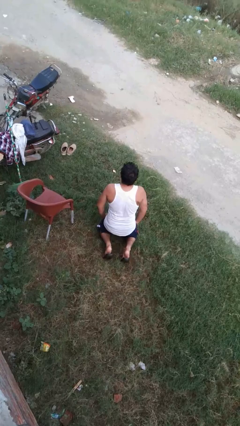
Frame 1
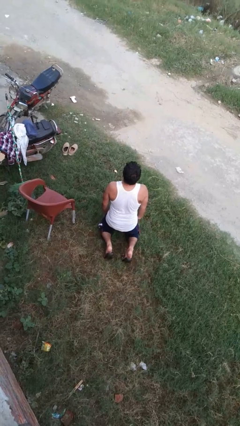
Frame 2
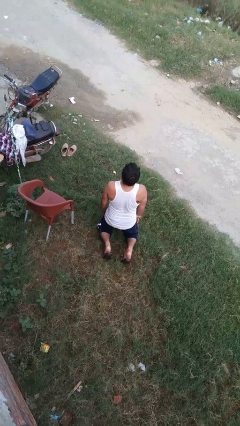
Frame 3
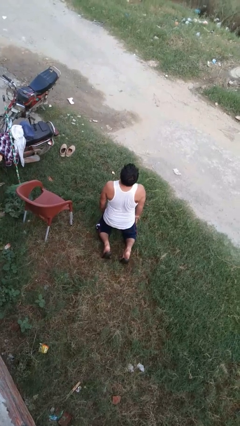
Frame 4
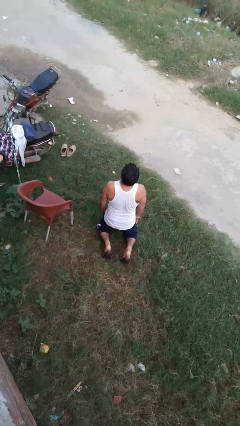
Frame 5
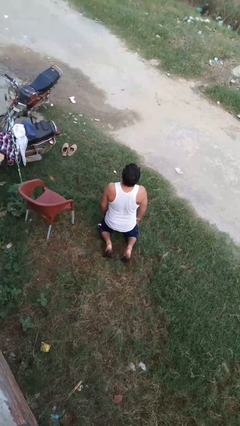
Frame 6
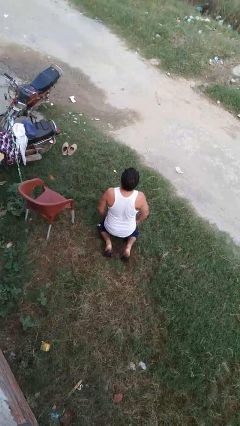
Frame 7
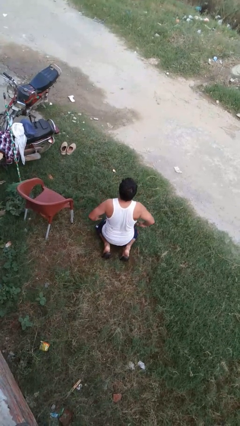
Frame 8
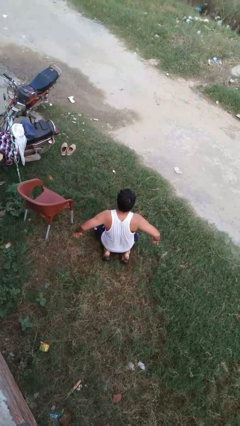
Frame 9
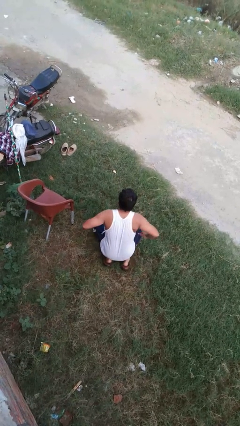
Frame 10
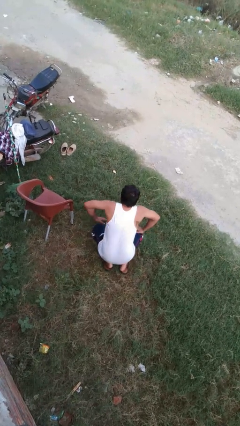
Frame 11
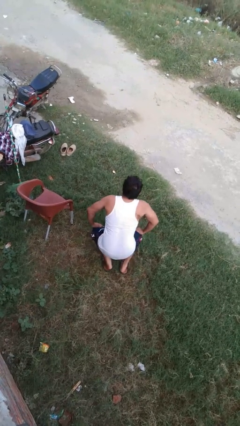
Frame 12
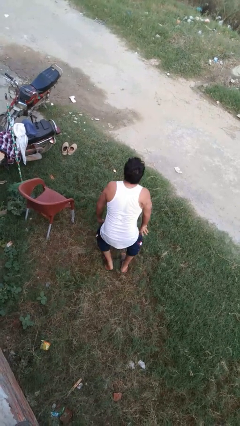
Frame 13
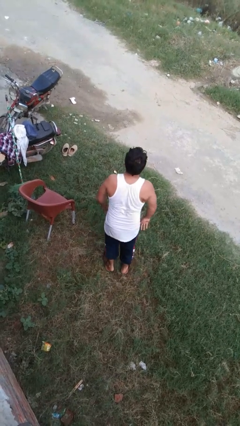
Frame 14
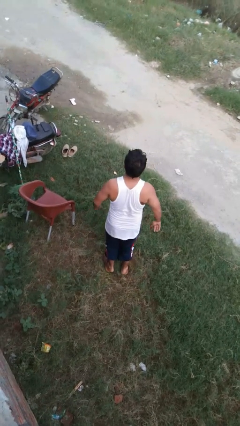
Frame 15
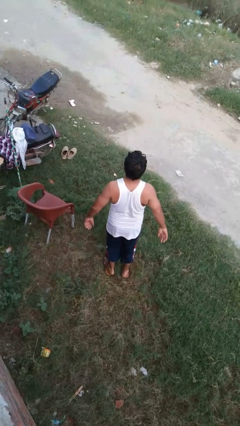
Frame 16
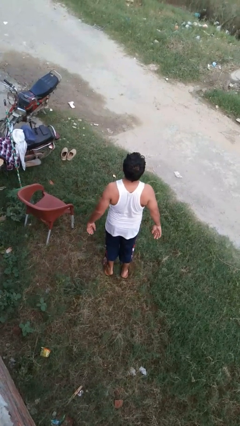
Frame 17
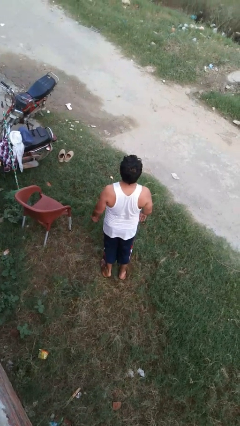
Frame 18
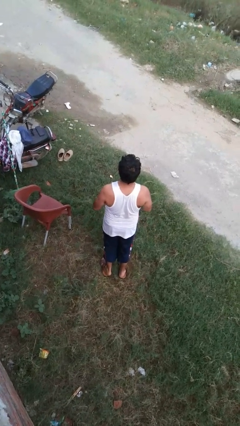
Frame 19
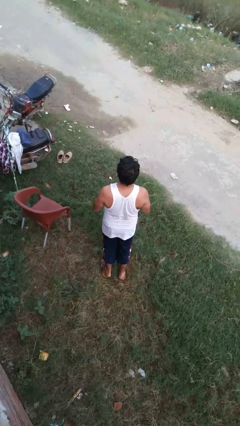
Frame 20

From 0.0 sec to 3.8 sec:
person stands up from floor

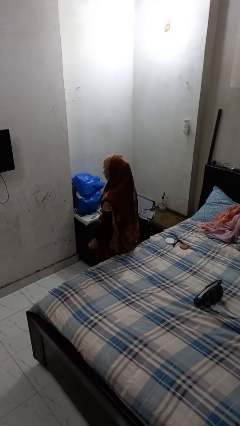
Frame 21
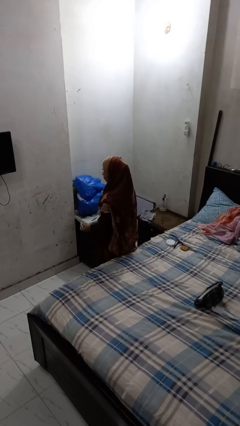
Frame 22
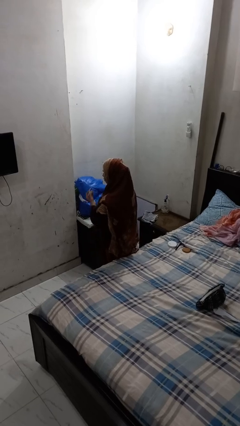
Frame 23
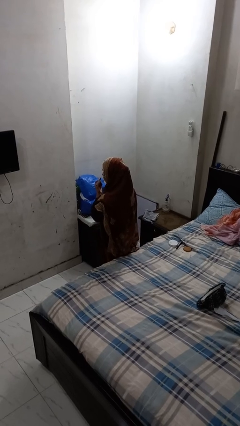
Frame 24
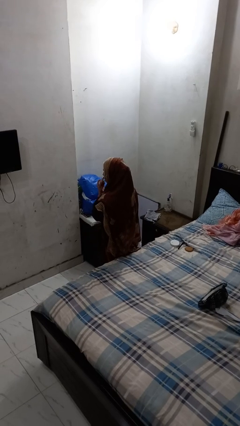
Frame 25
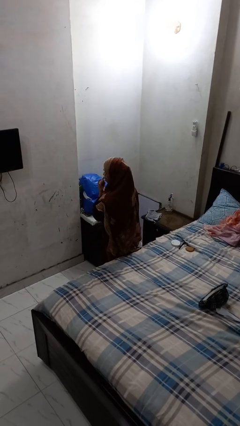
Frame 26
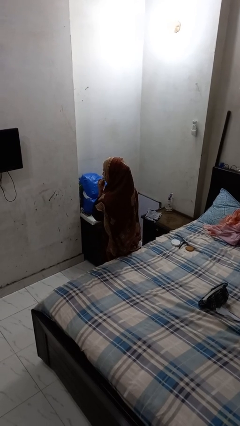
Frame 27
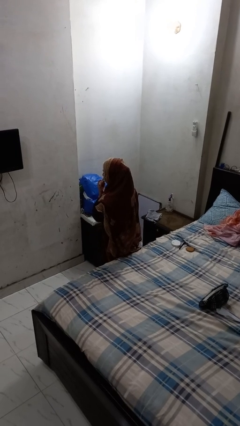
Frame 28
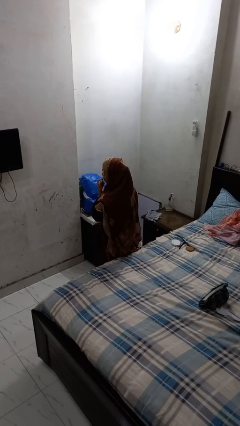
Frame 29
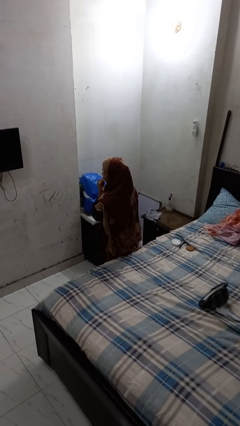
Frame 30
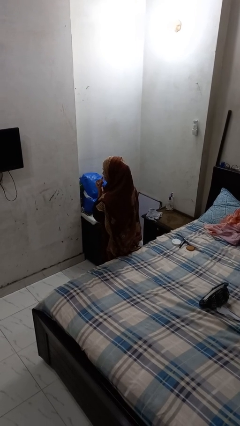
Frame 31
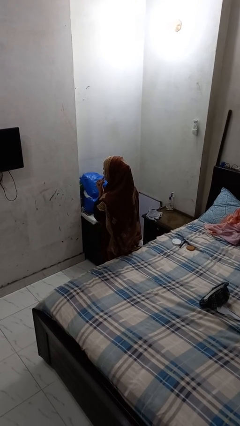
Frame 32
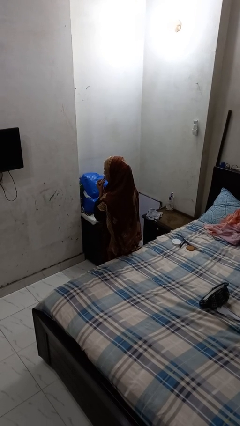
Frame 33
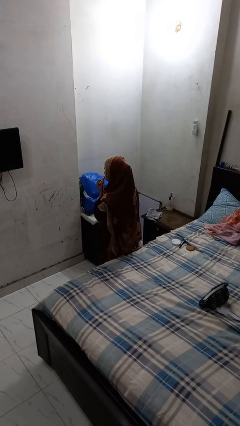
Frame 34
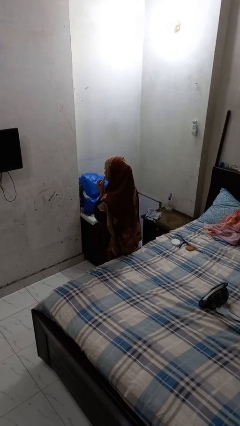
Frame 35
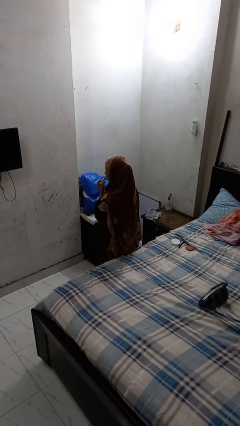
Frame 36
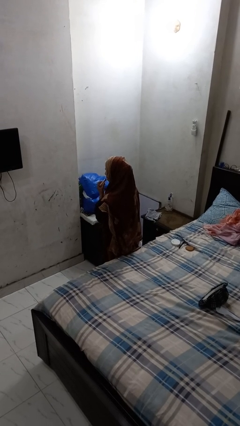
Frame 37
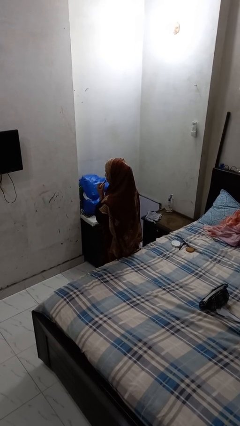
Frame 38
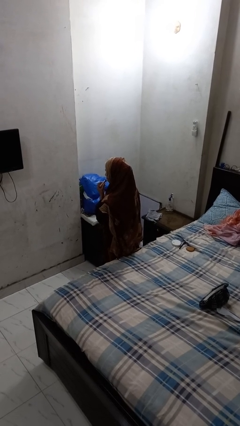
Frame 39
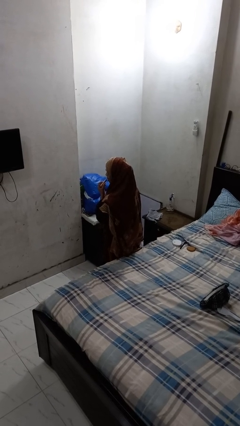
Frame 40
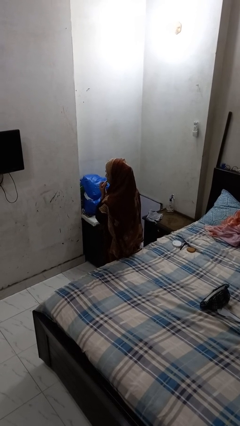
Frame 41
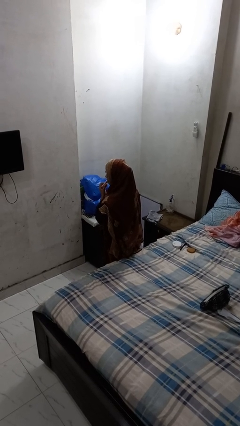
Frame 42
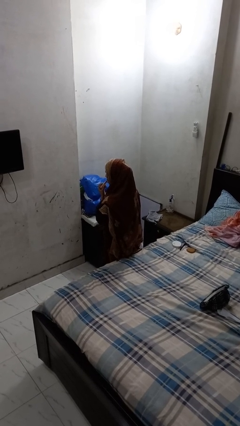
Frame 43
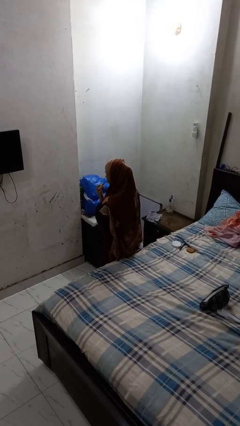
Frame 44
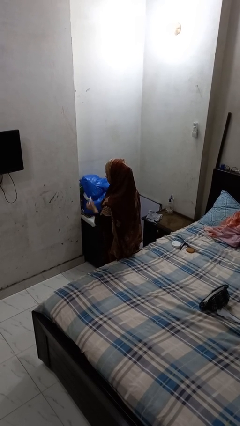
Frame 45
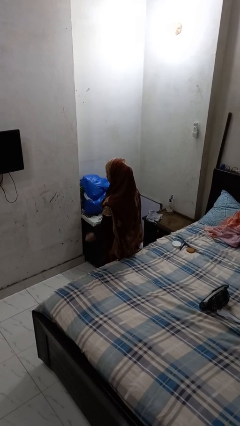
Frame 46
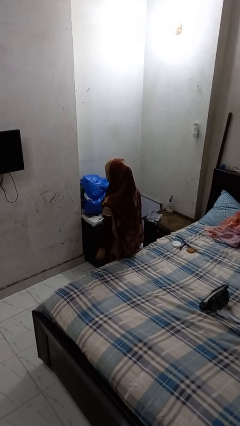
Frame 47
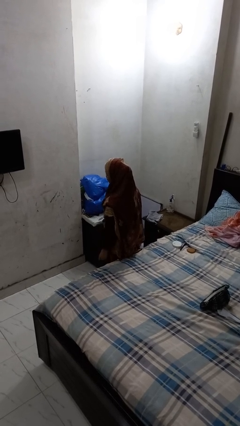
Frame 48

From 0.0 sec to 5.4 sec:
person applies lip makeup

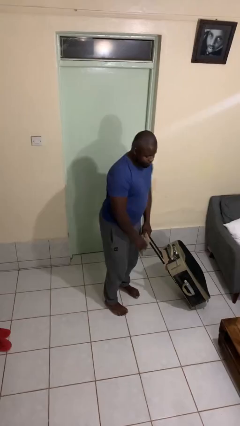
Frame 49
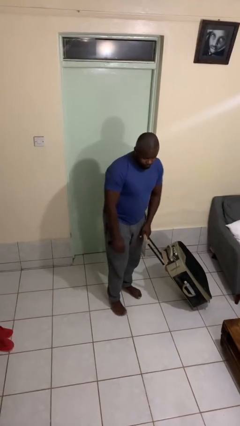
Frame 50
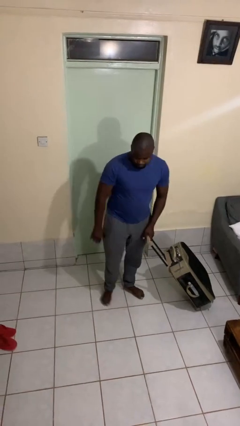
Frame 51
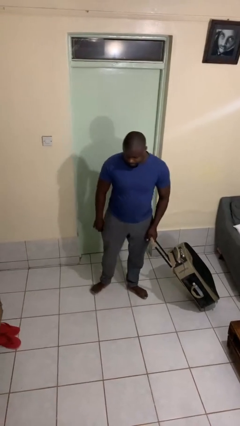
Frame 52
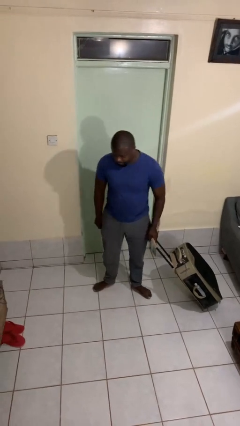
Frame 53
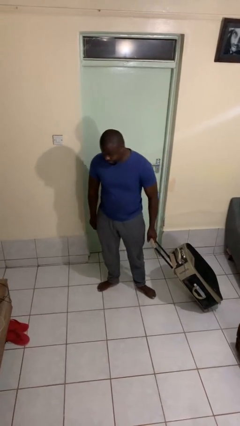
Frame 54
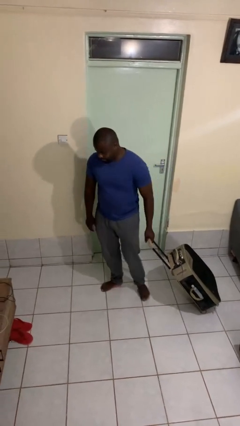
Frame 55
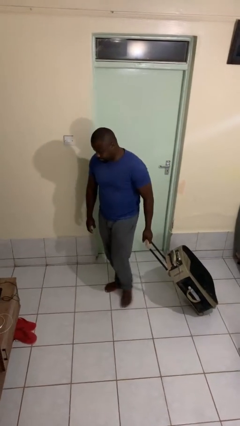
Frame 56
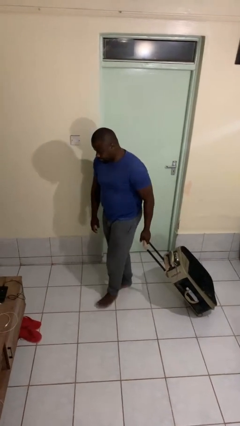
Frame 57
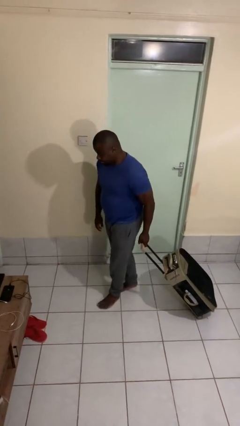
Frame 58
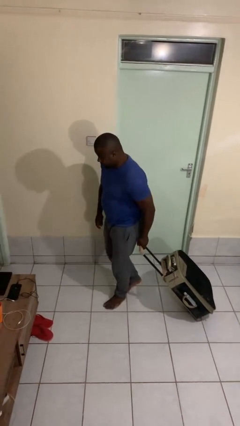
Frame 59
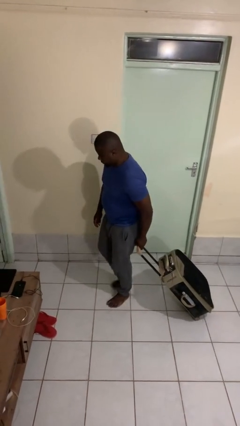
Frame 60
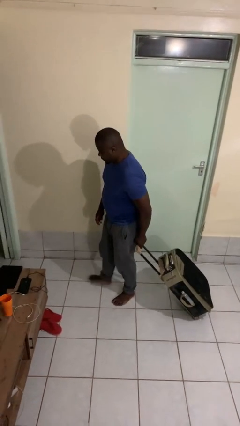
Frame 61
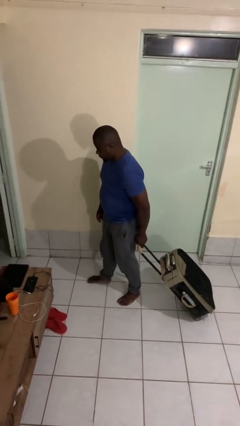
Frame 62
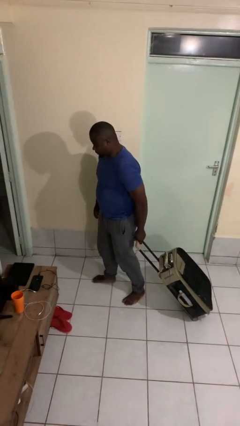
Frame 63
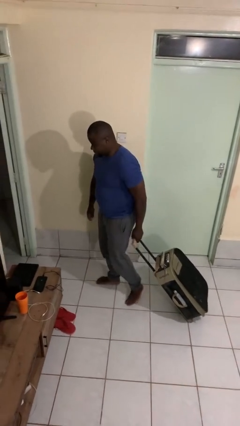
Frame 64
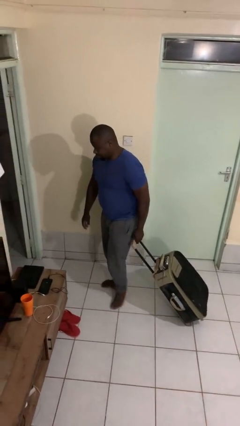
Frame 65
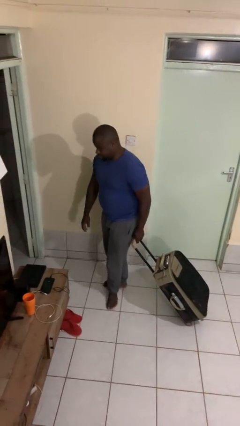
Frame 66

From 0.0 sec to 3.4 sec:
person pulls wheeled cart

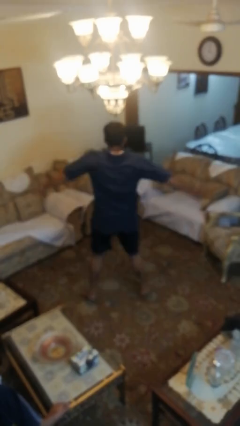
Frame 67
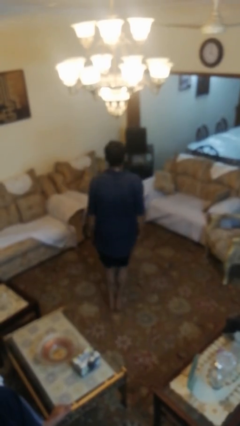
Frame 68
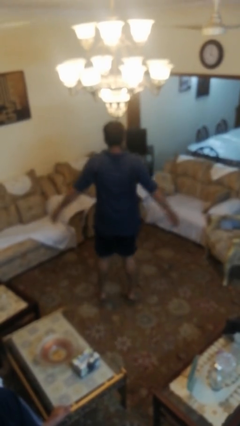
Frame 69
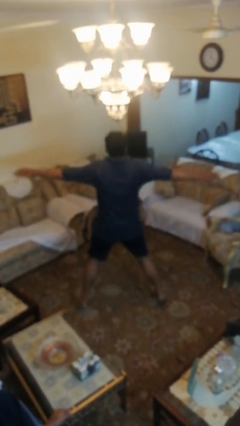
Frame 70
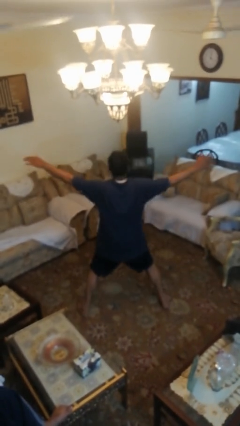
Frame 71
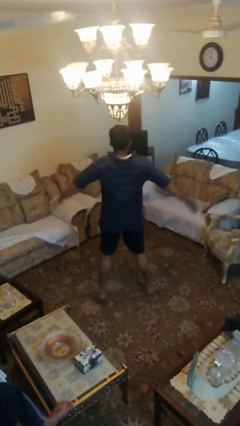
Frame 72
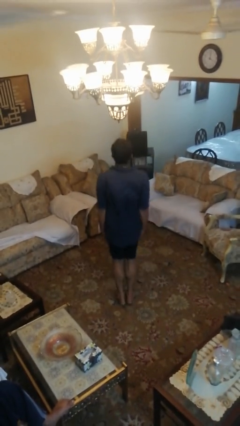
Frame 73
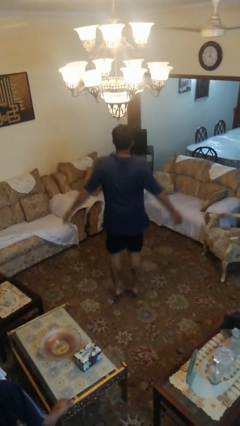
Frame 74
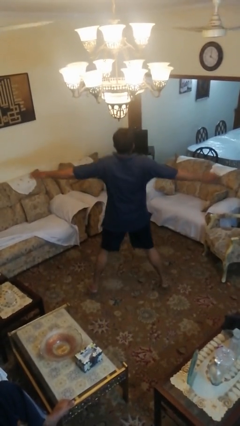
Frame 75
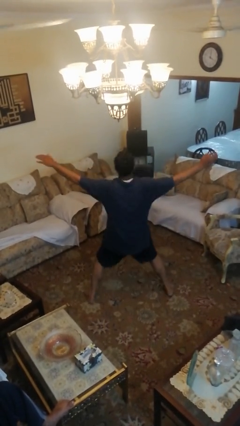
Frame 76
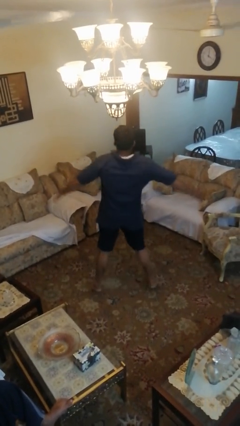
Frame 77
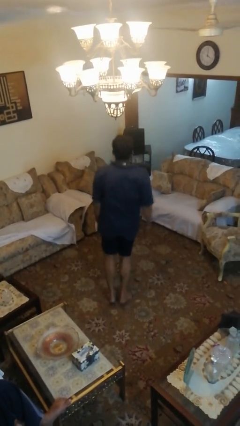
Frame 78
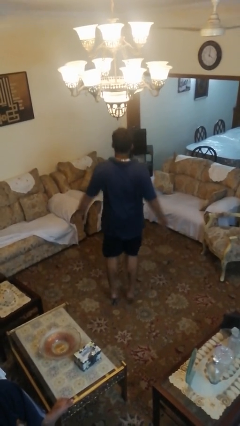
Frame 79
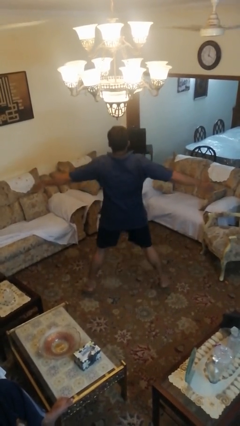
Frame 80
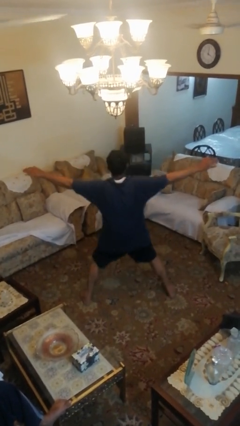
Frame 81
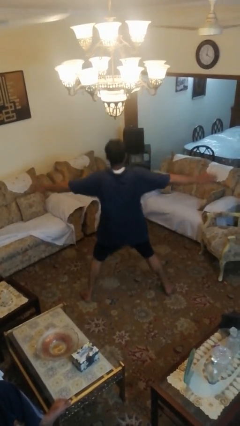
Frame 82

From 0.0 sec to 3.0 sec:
person exercises with jumping jacks

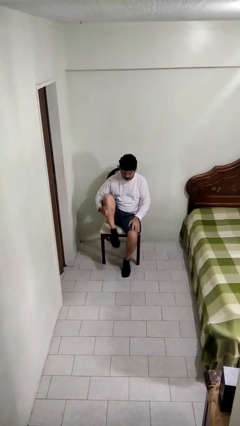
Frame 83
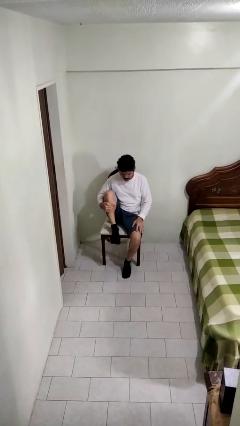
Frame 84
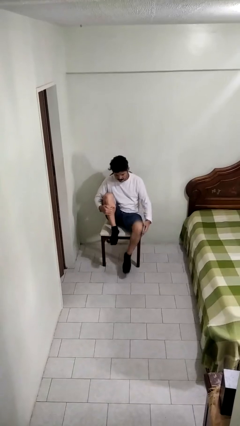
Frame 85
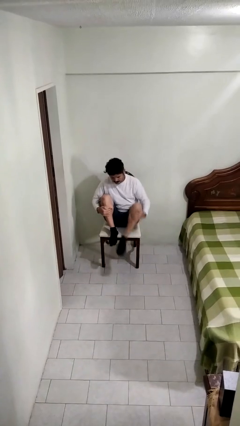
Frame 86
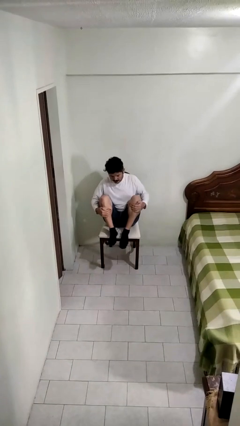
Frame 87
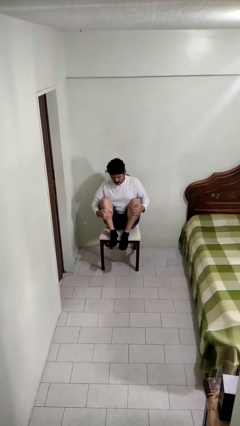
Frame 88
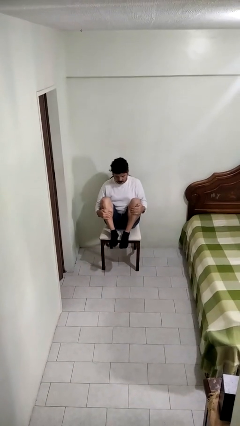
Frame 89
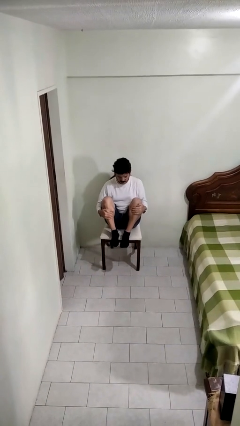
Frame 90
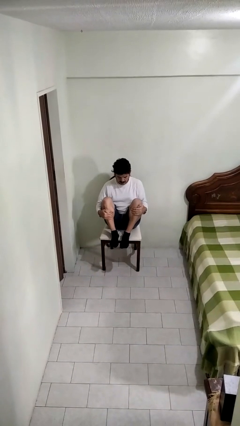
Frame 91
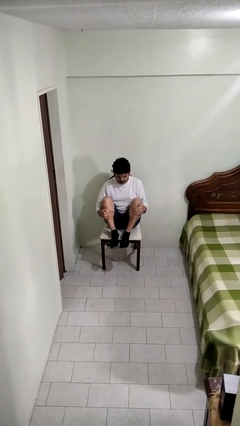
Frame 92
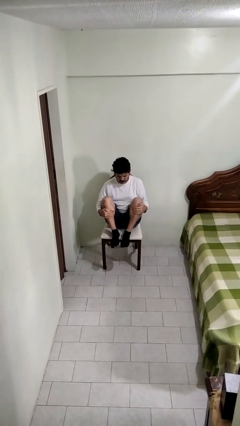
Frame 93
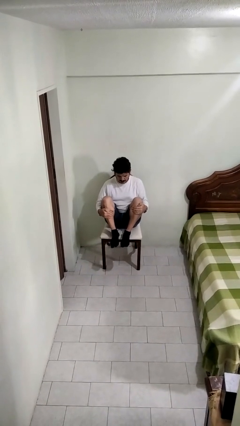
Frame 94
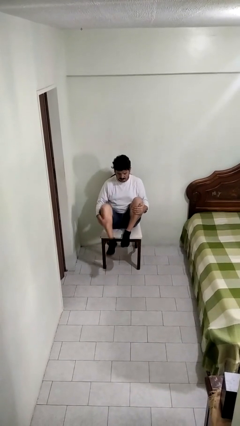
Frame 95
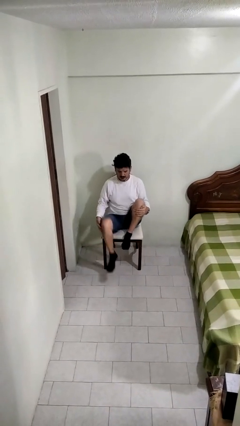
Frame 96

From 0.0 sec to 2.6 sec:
person puts feet up
